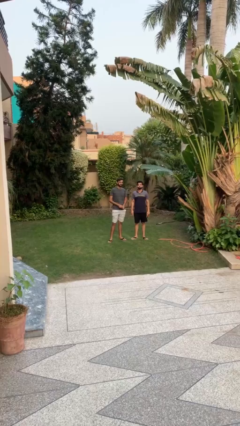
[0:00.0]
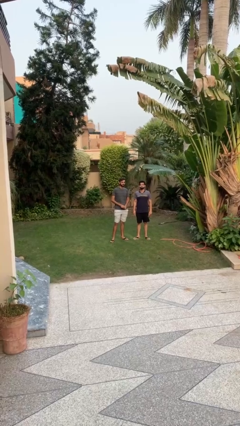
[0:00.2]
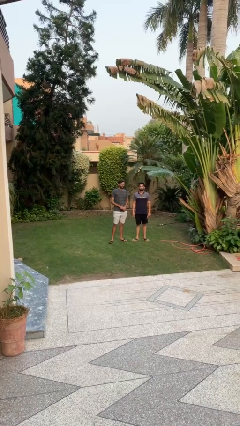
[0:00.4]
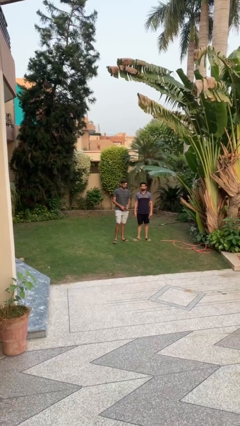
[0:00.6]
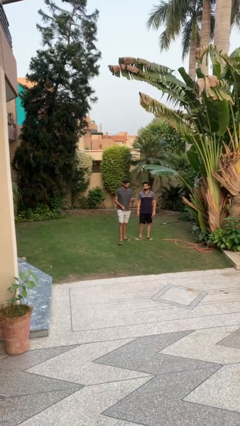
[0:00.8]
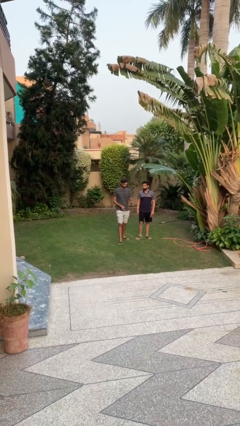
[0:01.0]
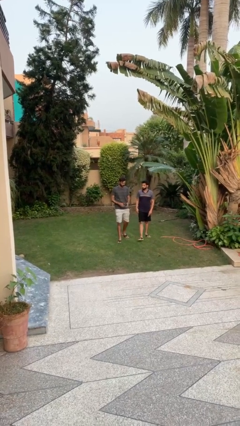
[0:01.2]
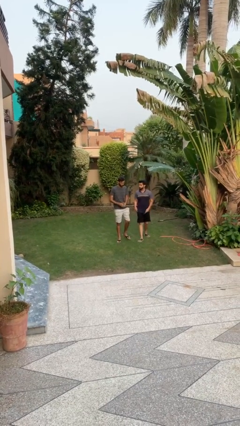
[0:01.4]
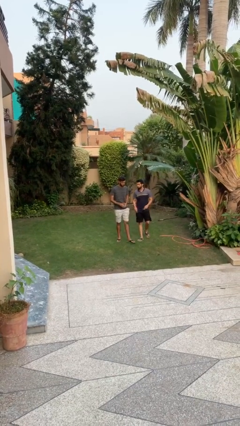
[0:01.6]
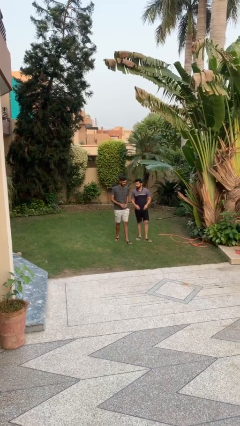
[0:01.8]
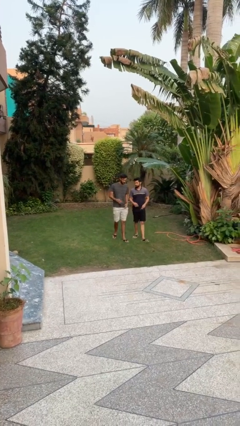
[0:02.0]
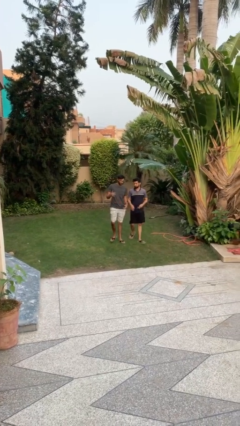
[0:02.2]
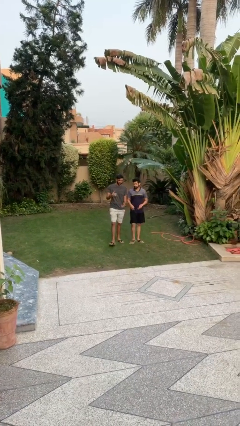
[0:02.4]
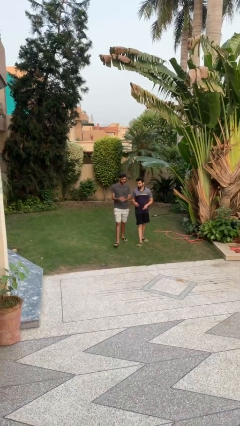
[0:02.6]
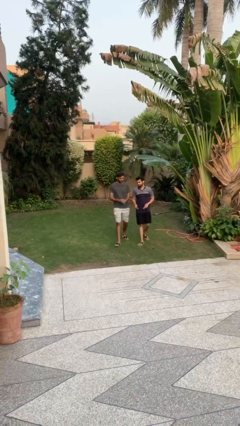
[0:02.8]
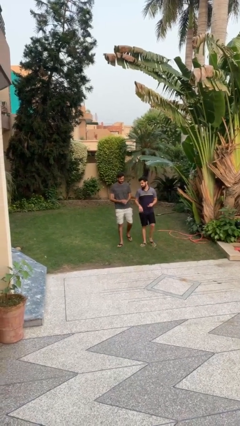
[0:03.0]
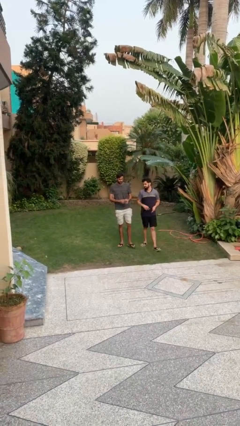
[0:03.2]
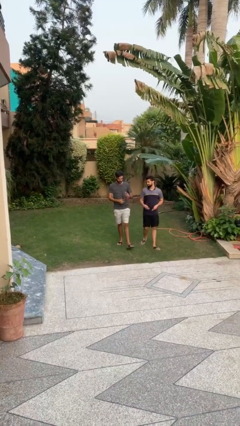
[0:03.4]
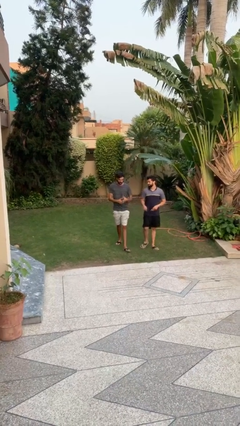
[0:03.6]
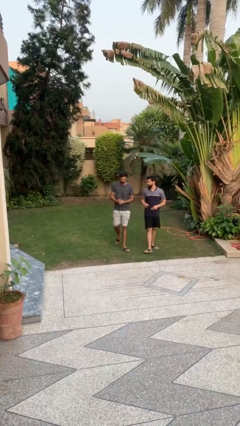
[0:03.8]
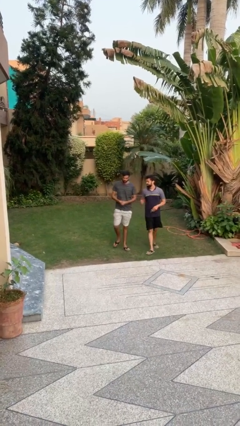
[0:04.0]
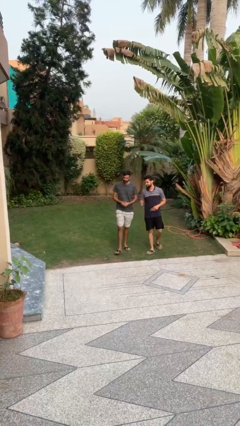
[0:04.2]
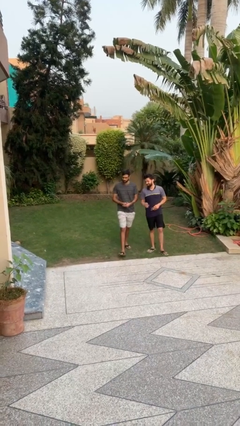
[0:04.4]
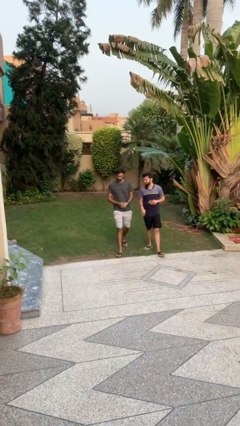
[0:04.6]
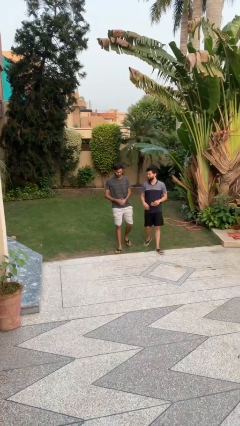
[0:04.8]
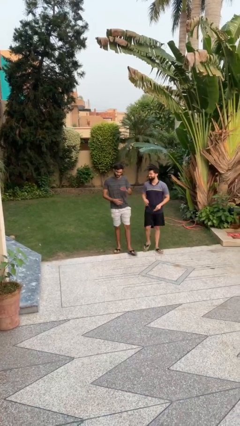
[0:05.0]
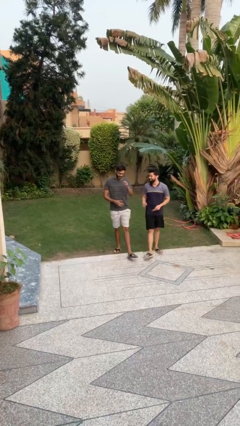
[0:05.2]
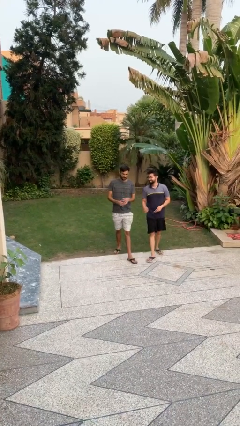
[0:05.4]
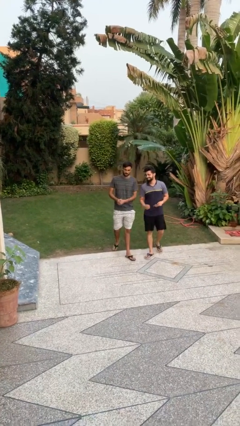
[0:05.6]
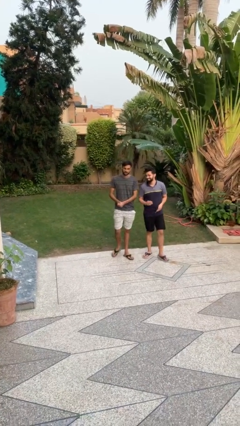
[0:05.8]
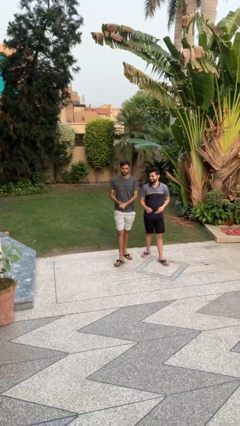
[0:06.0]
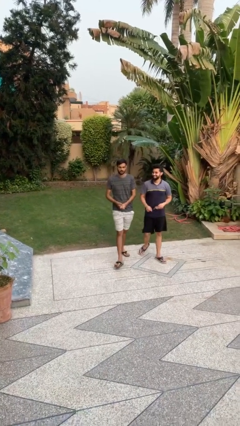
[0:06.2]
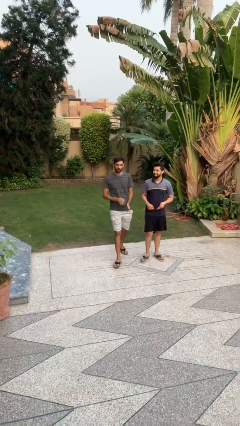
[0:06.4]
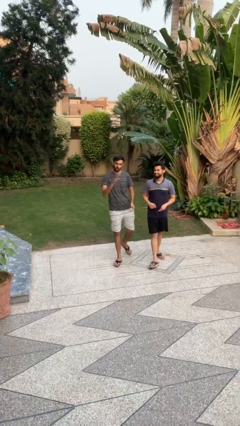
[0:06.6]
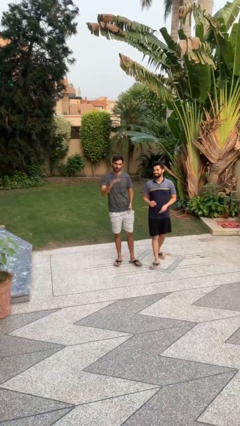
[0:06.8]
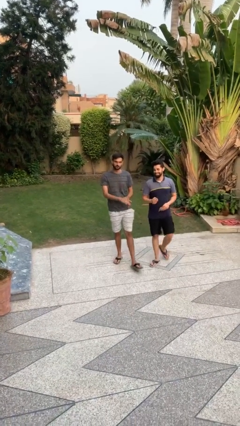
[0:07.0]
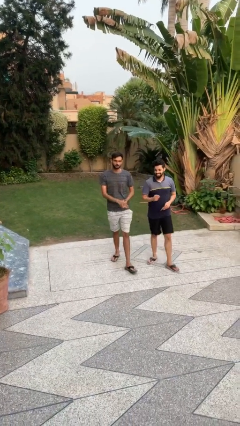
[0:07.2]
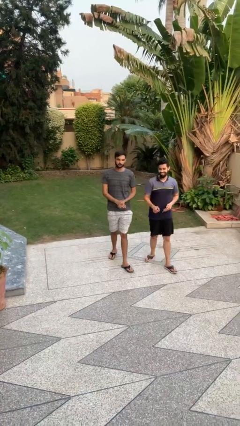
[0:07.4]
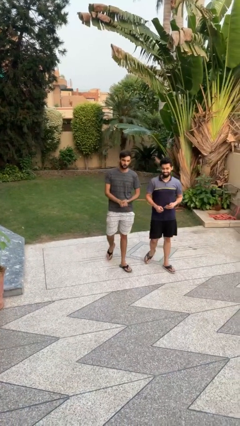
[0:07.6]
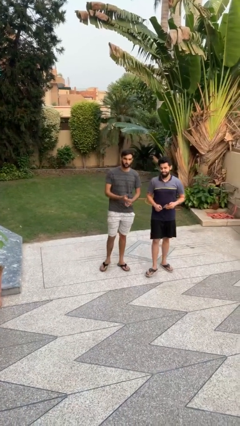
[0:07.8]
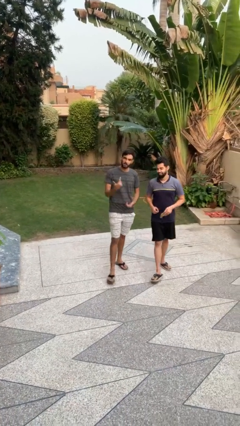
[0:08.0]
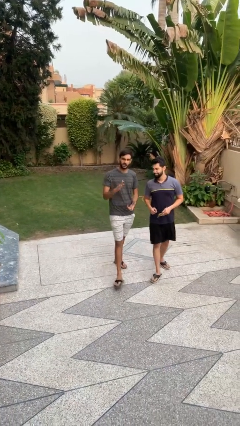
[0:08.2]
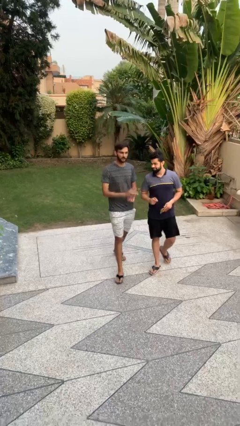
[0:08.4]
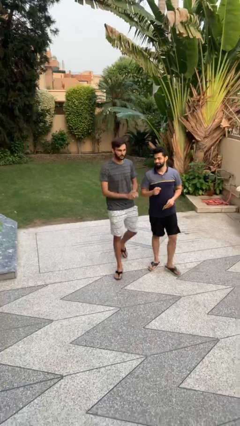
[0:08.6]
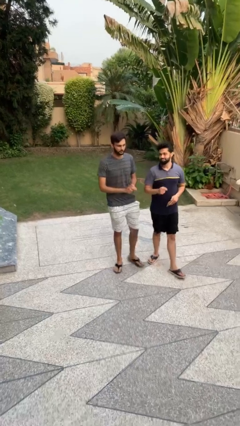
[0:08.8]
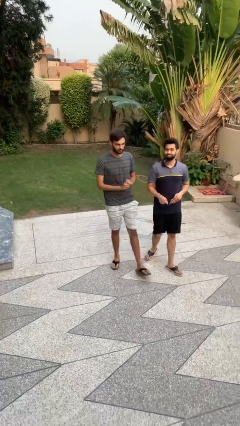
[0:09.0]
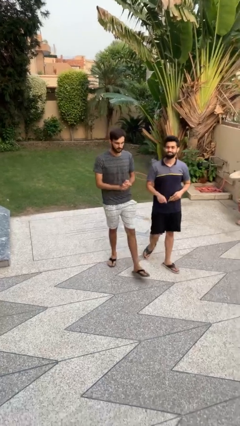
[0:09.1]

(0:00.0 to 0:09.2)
person talks to person

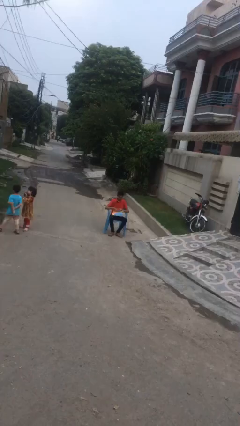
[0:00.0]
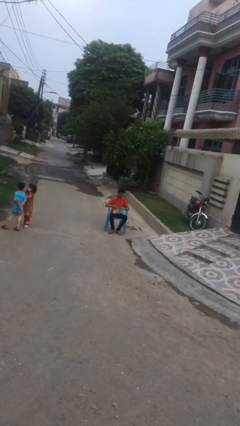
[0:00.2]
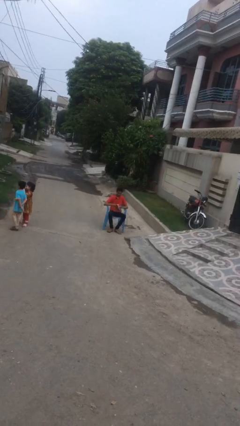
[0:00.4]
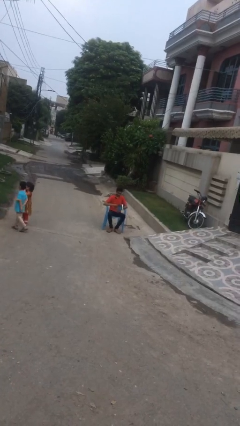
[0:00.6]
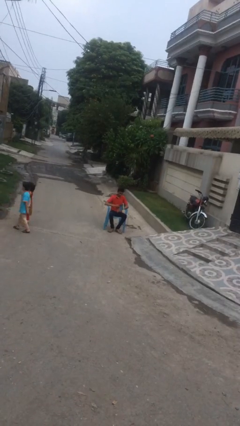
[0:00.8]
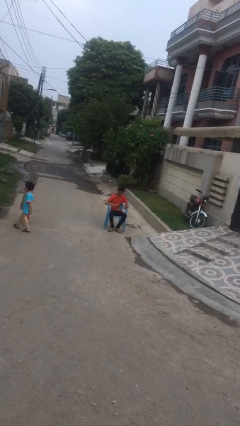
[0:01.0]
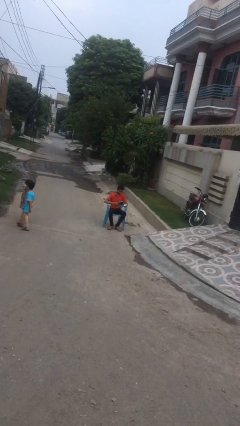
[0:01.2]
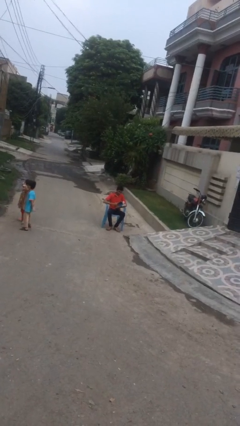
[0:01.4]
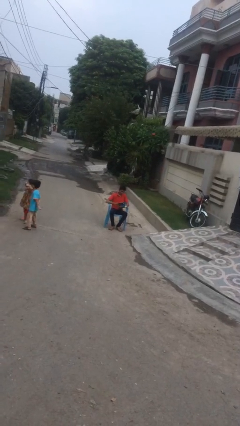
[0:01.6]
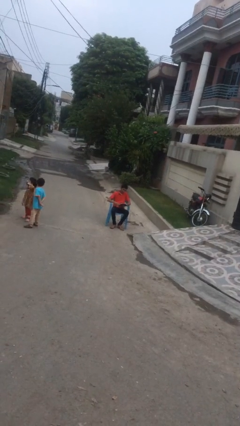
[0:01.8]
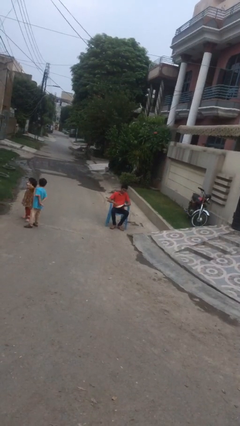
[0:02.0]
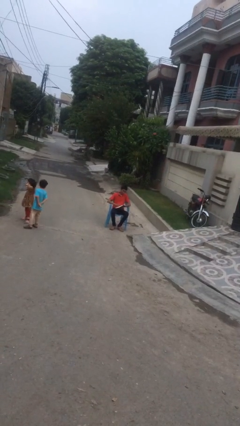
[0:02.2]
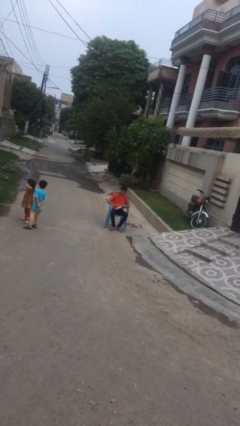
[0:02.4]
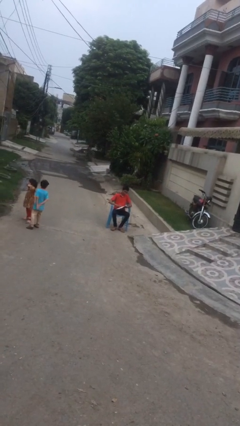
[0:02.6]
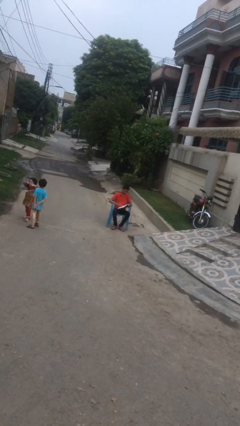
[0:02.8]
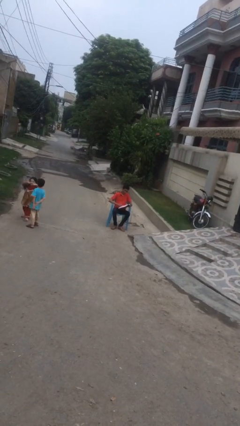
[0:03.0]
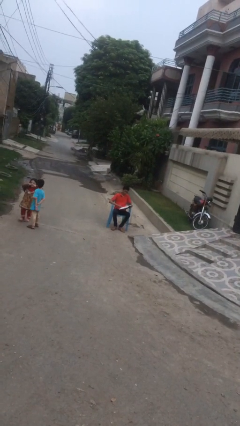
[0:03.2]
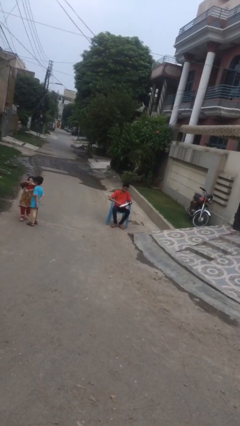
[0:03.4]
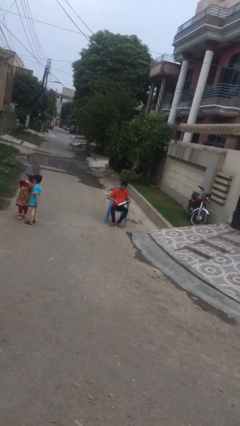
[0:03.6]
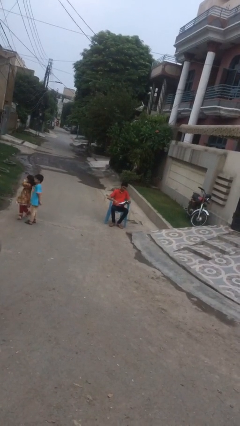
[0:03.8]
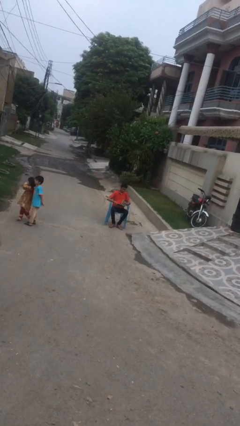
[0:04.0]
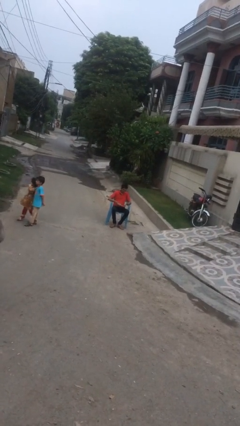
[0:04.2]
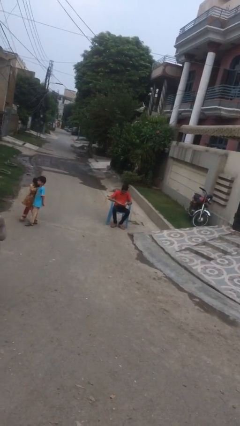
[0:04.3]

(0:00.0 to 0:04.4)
person reads document

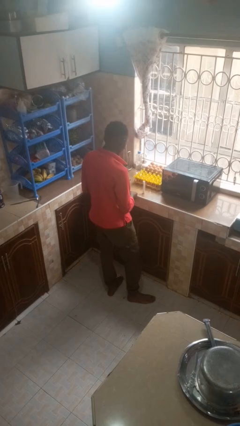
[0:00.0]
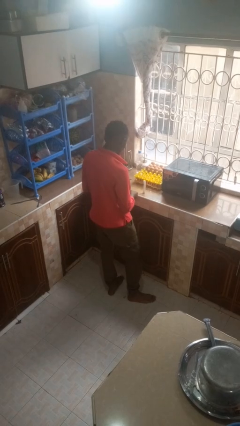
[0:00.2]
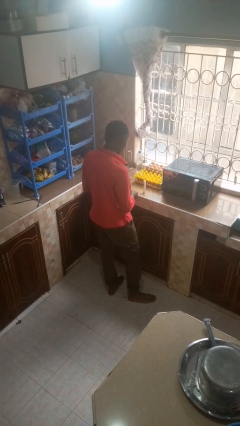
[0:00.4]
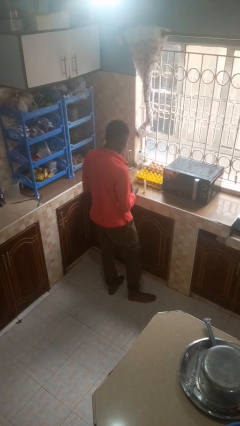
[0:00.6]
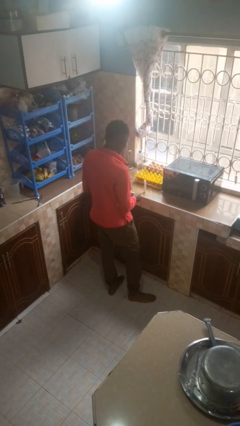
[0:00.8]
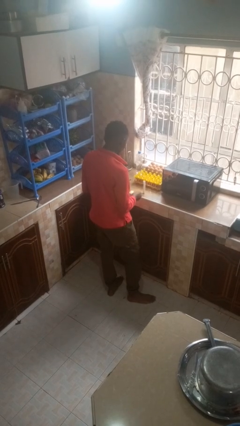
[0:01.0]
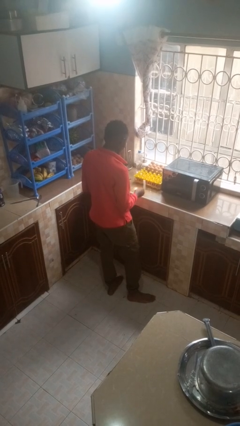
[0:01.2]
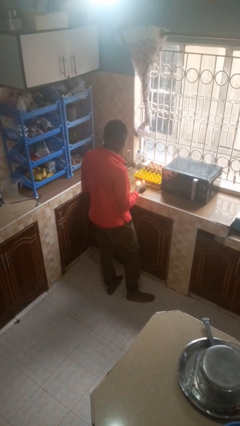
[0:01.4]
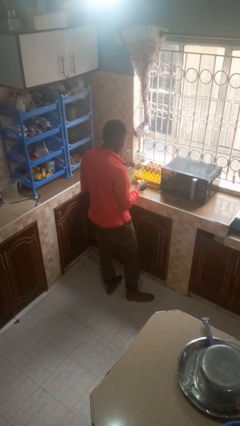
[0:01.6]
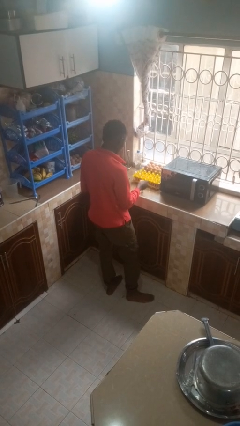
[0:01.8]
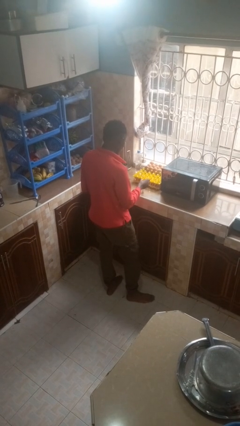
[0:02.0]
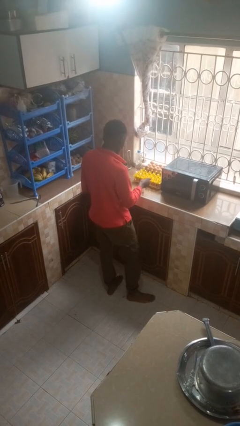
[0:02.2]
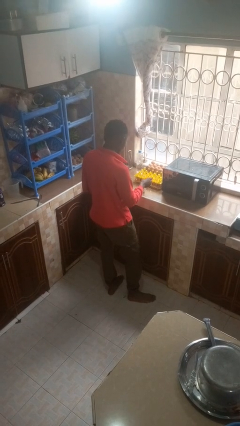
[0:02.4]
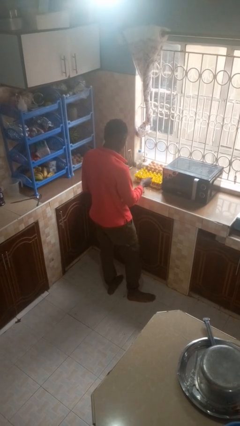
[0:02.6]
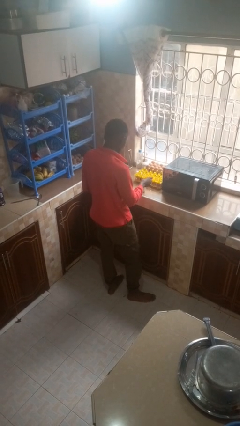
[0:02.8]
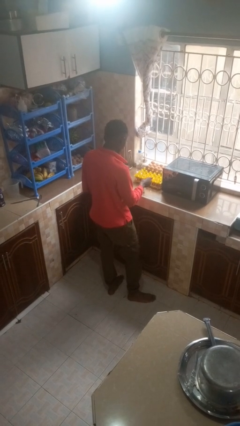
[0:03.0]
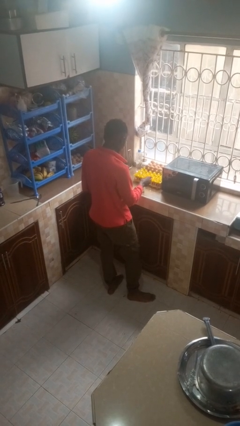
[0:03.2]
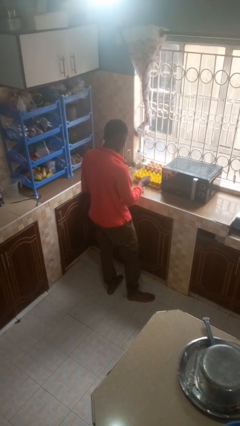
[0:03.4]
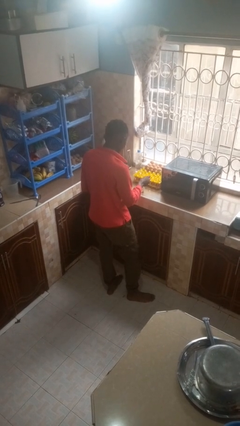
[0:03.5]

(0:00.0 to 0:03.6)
person lights candle

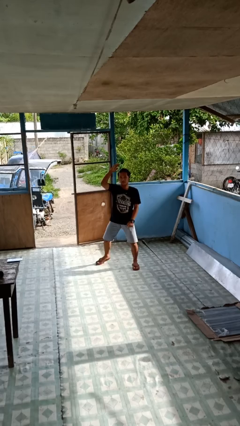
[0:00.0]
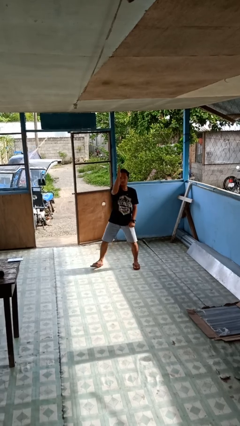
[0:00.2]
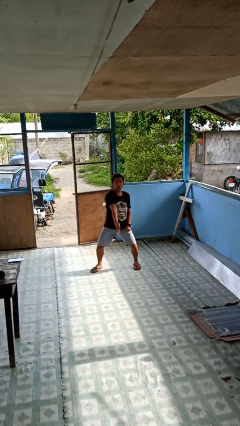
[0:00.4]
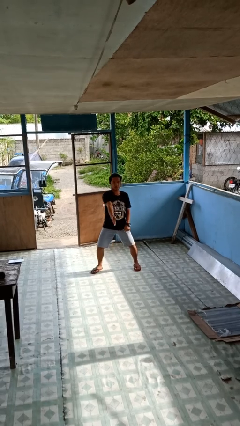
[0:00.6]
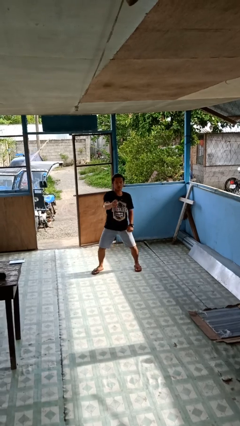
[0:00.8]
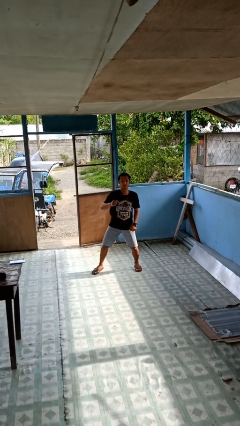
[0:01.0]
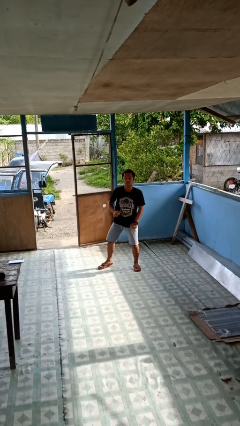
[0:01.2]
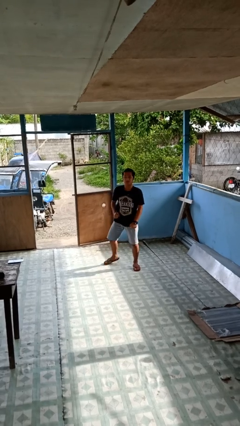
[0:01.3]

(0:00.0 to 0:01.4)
person karate chop
